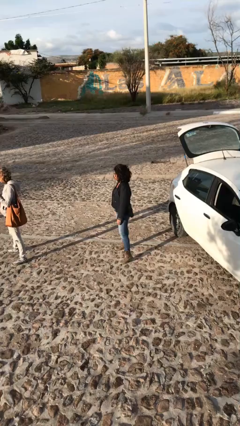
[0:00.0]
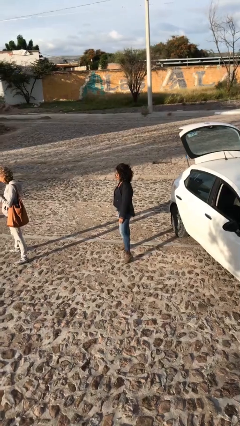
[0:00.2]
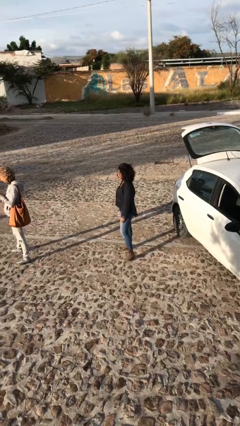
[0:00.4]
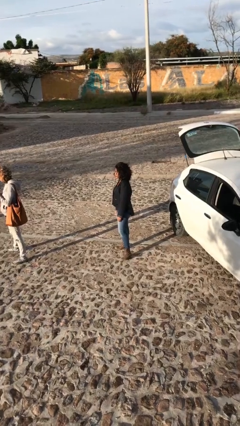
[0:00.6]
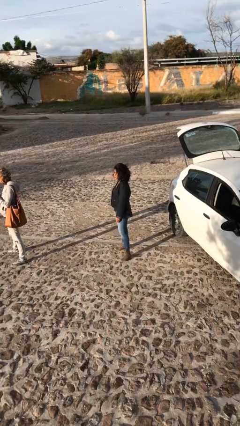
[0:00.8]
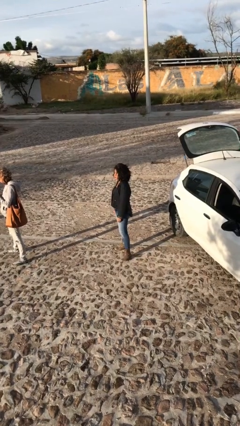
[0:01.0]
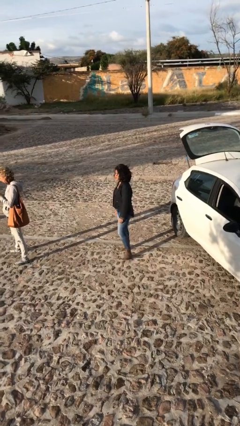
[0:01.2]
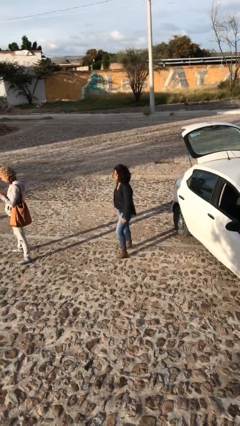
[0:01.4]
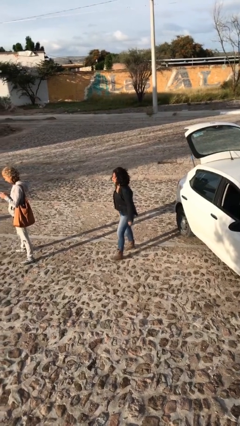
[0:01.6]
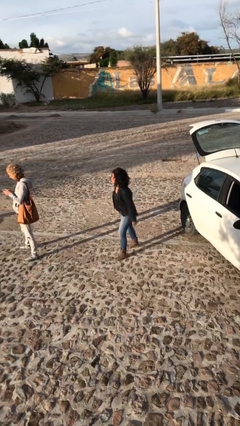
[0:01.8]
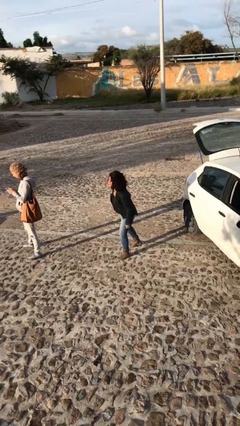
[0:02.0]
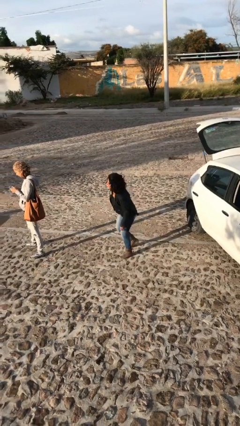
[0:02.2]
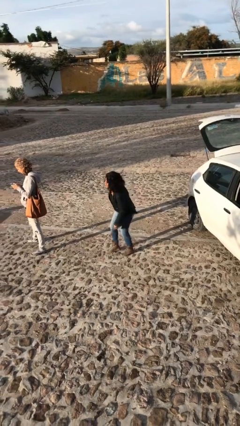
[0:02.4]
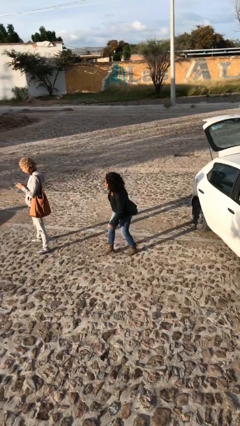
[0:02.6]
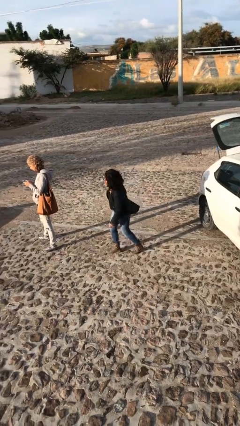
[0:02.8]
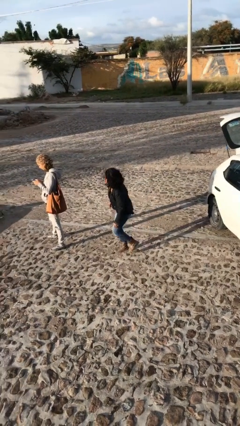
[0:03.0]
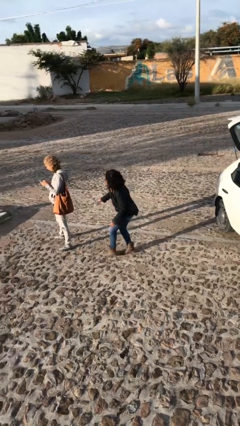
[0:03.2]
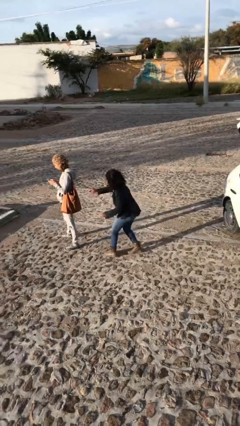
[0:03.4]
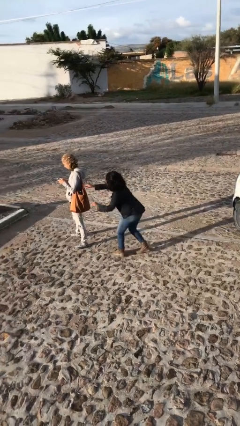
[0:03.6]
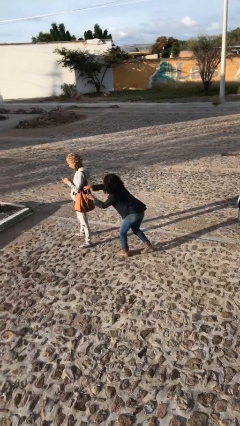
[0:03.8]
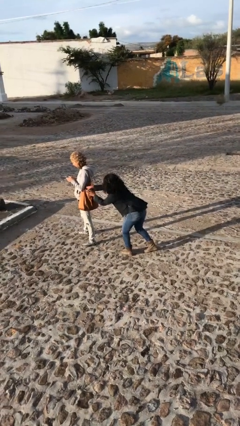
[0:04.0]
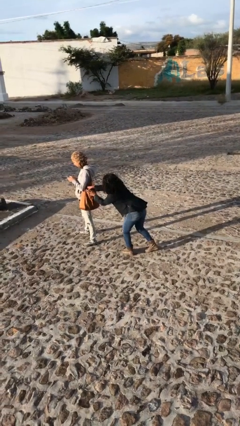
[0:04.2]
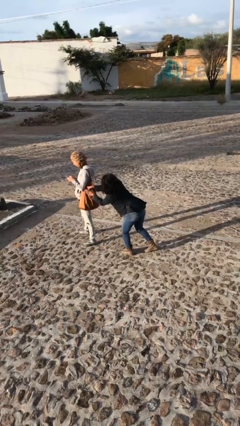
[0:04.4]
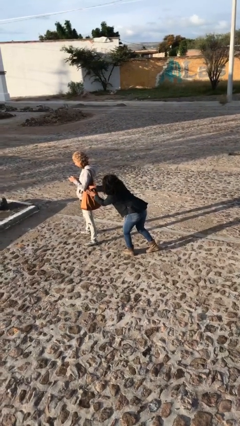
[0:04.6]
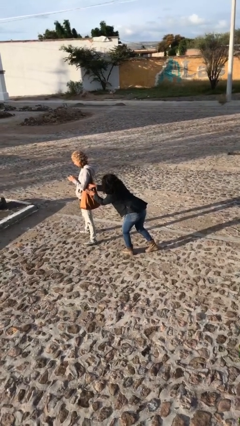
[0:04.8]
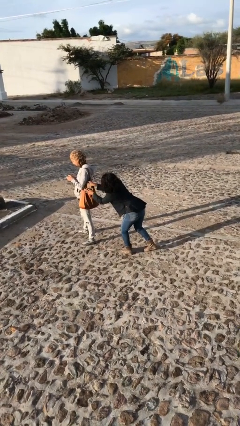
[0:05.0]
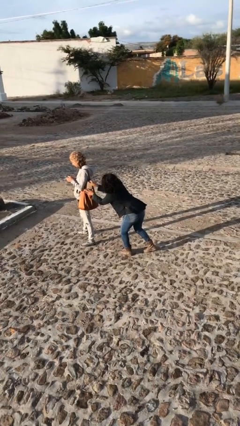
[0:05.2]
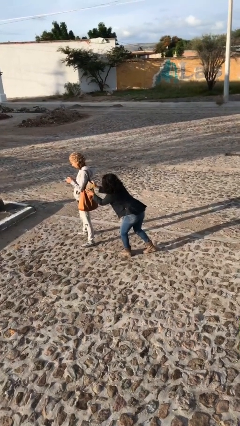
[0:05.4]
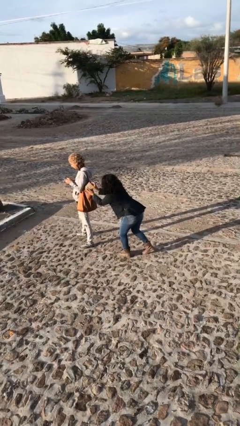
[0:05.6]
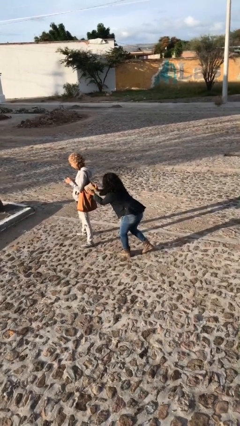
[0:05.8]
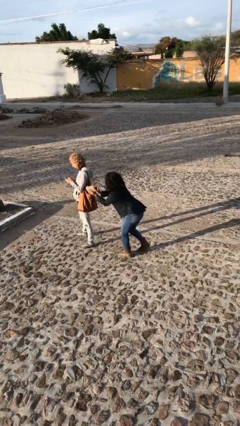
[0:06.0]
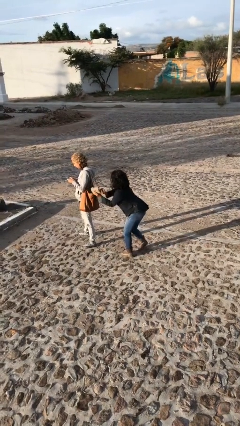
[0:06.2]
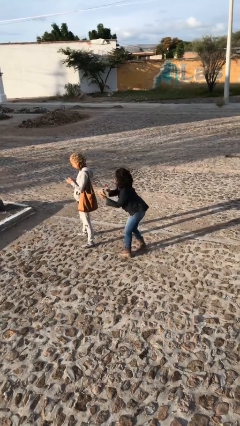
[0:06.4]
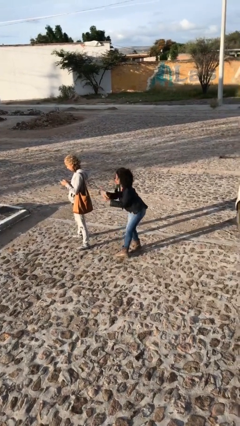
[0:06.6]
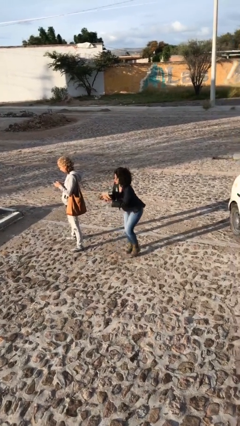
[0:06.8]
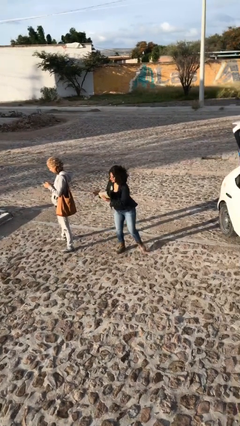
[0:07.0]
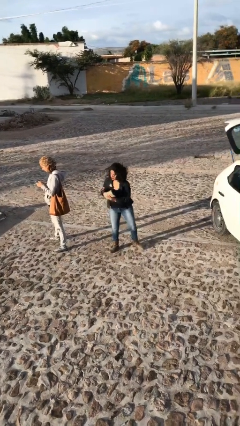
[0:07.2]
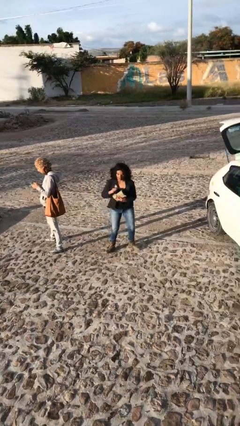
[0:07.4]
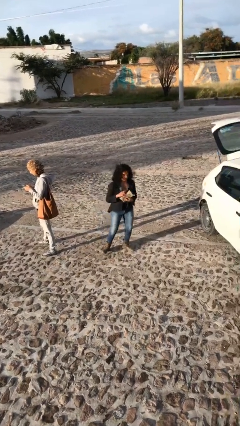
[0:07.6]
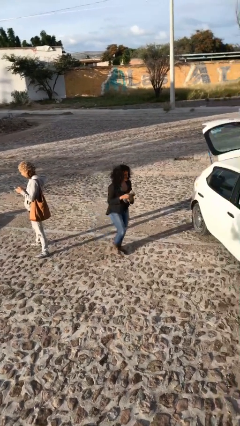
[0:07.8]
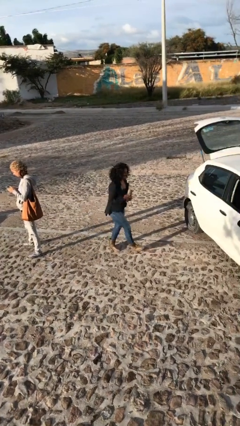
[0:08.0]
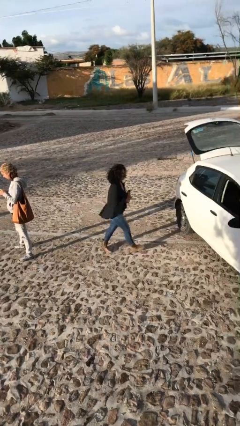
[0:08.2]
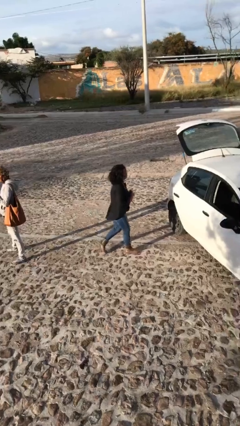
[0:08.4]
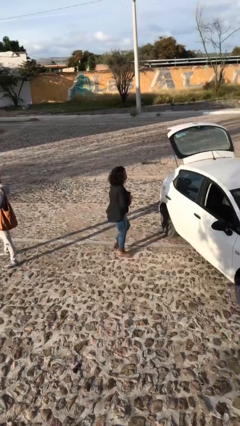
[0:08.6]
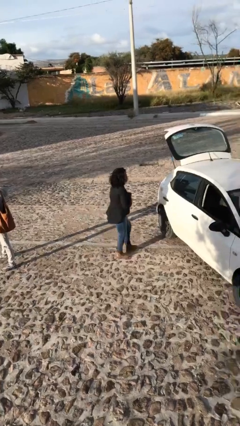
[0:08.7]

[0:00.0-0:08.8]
person steals object from person

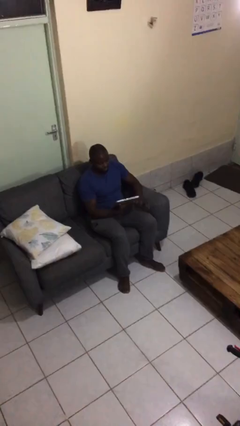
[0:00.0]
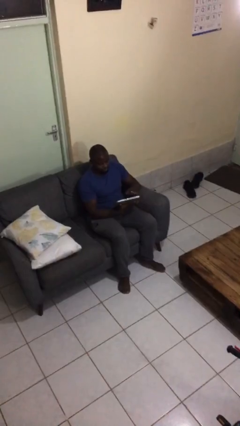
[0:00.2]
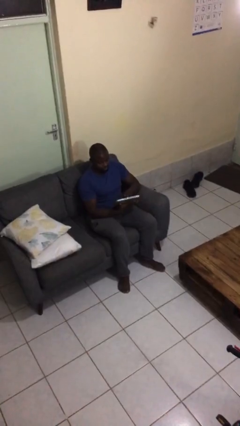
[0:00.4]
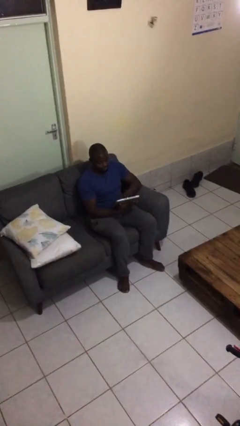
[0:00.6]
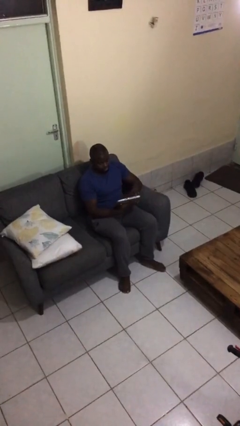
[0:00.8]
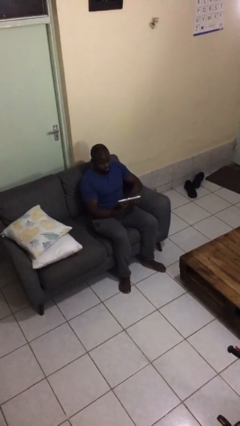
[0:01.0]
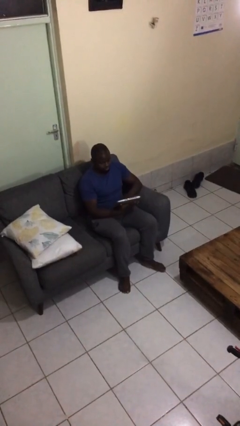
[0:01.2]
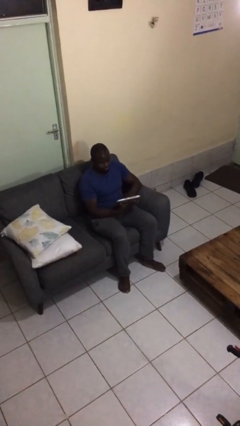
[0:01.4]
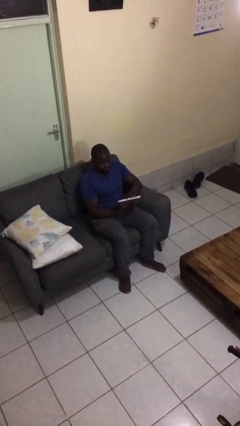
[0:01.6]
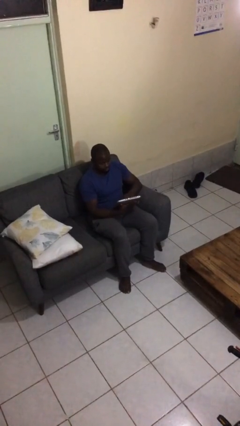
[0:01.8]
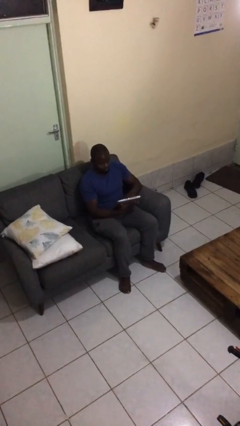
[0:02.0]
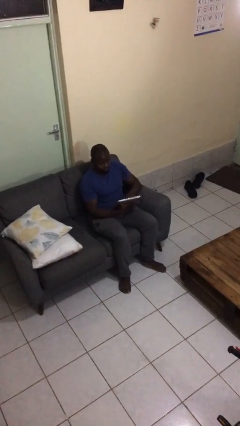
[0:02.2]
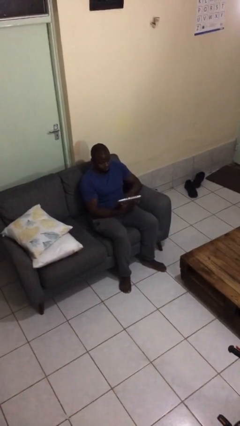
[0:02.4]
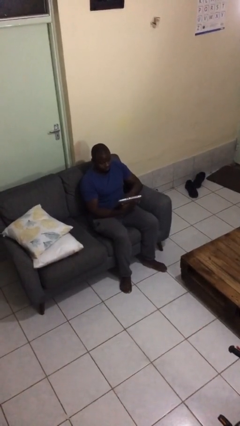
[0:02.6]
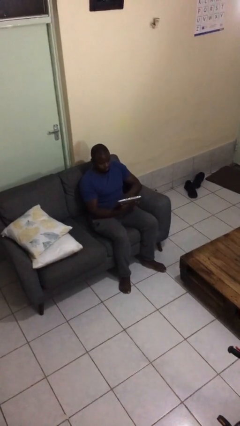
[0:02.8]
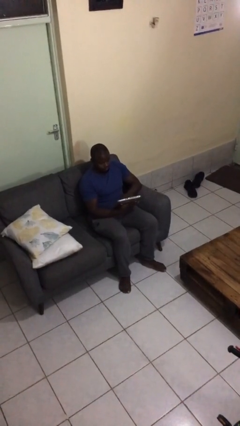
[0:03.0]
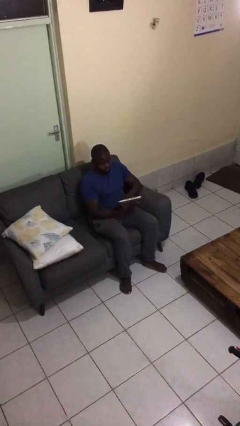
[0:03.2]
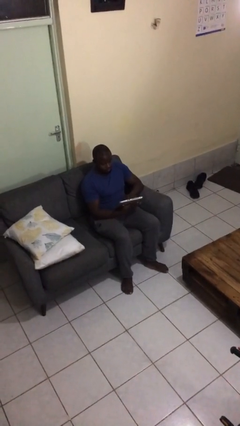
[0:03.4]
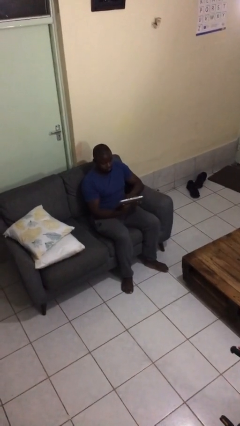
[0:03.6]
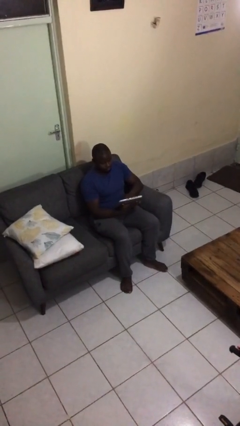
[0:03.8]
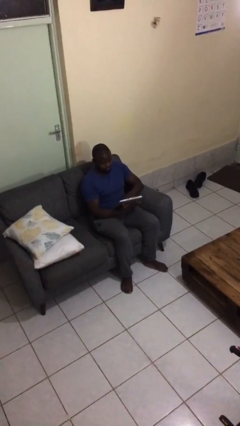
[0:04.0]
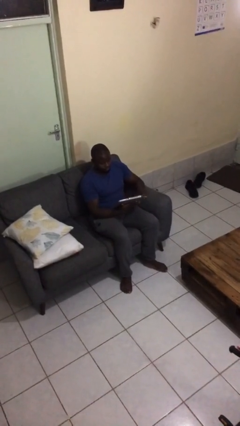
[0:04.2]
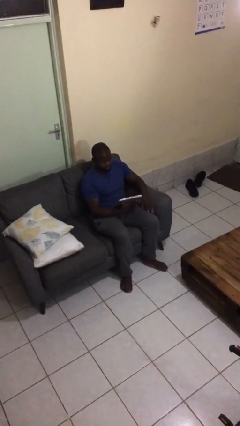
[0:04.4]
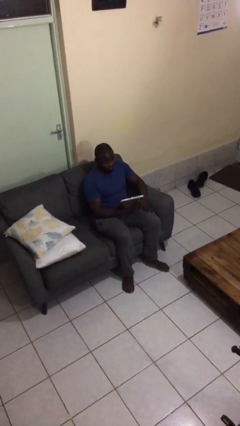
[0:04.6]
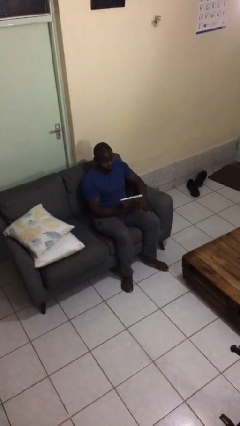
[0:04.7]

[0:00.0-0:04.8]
person interacts with tablet

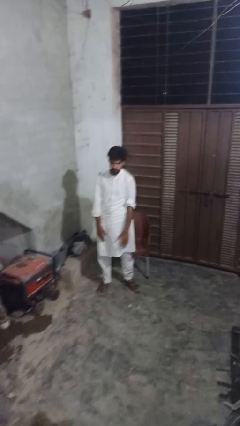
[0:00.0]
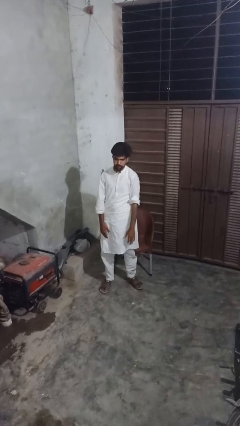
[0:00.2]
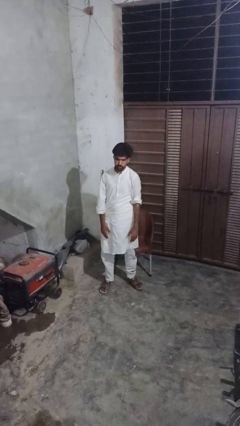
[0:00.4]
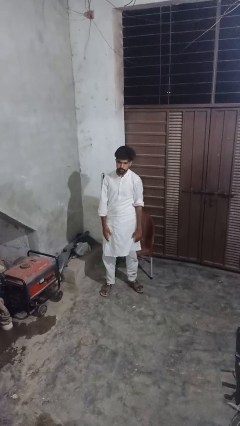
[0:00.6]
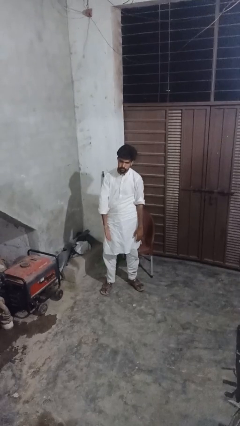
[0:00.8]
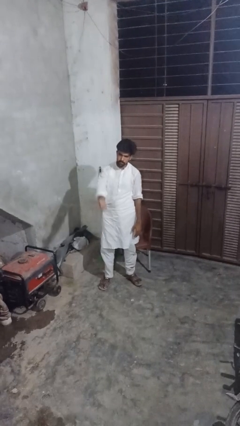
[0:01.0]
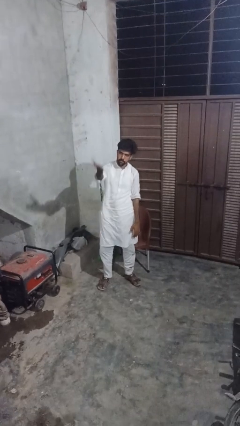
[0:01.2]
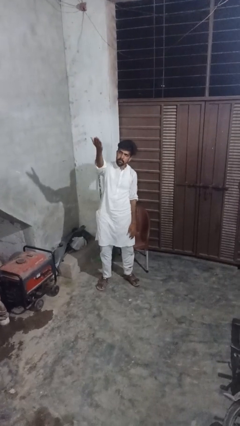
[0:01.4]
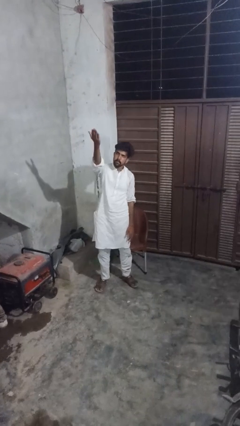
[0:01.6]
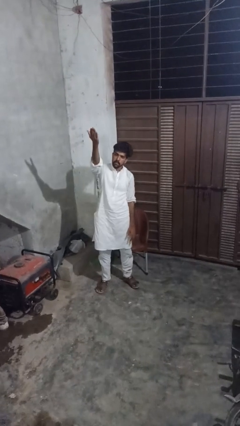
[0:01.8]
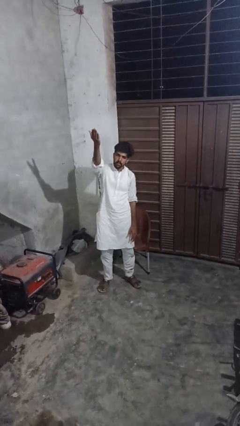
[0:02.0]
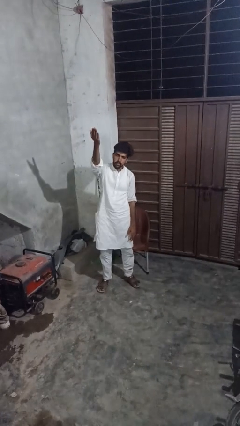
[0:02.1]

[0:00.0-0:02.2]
person gestures swipe up

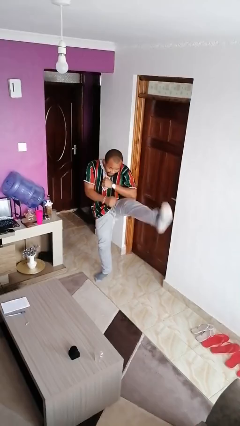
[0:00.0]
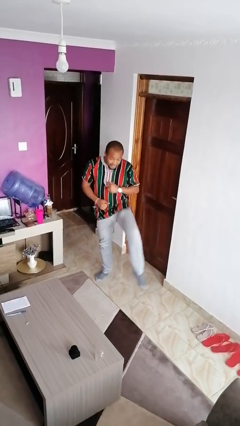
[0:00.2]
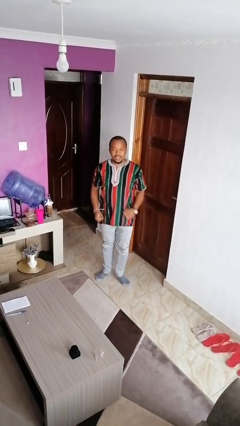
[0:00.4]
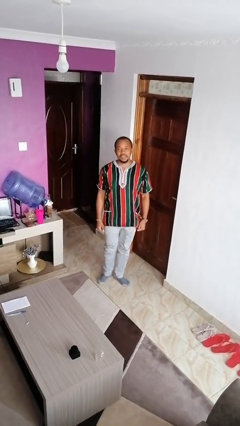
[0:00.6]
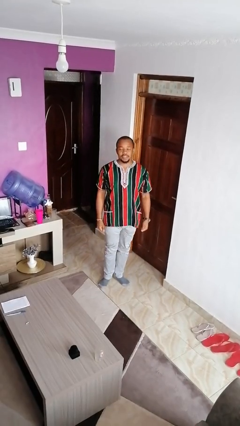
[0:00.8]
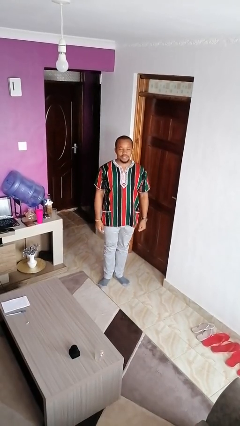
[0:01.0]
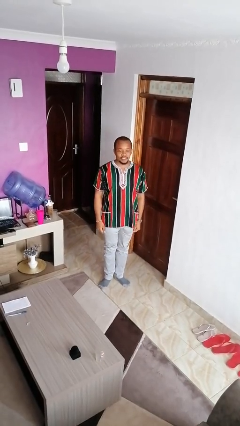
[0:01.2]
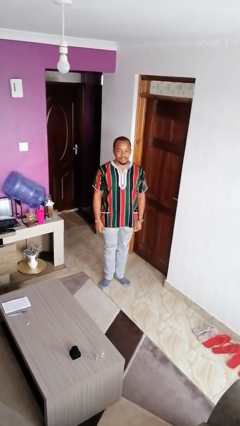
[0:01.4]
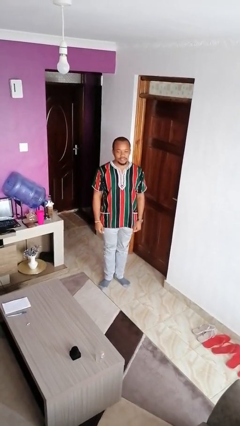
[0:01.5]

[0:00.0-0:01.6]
person karate kicks

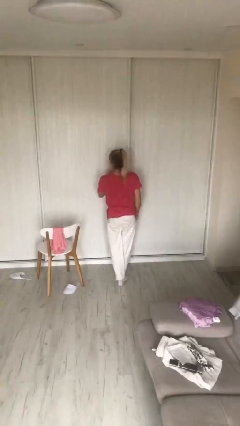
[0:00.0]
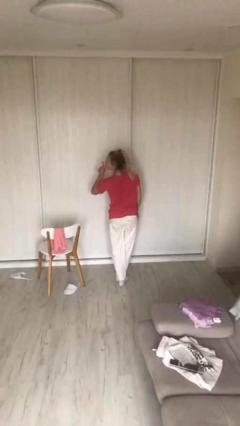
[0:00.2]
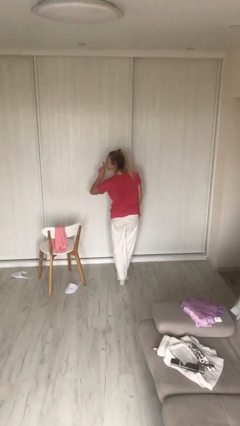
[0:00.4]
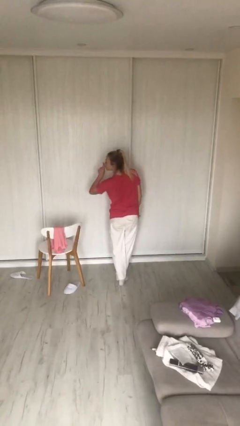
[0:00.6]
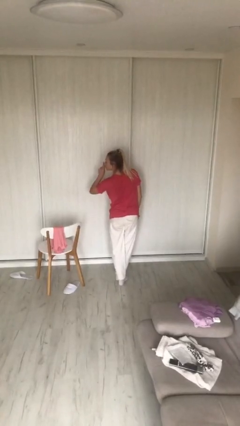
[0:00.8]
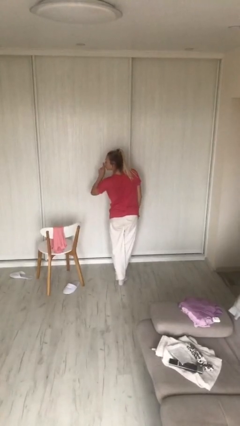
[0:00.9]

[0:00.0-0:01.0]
person gestures be quiet
